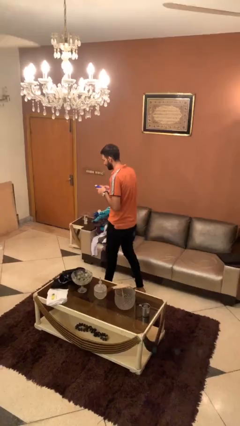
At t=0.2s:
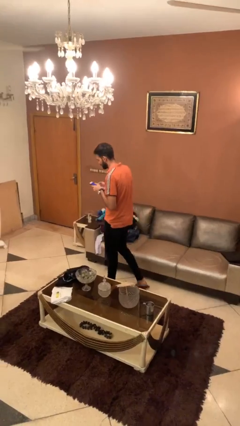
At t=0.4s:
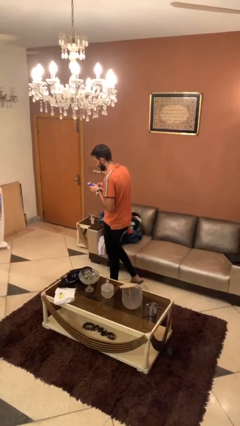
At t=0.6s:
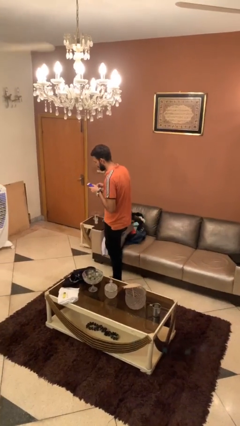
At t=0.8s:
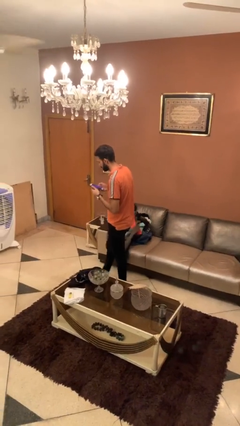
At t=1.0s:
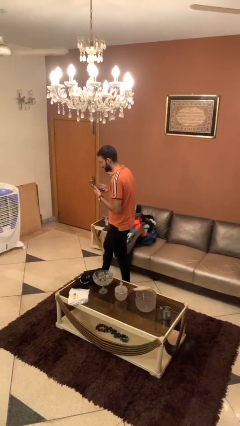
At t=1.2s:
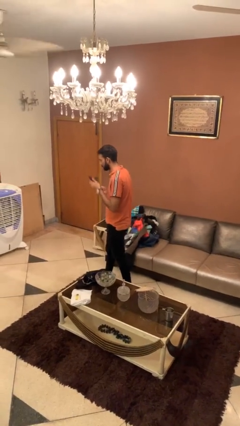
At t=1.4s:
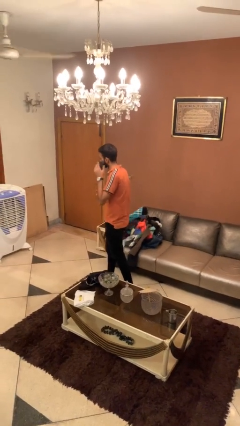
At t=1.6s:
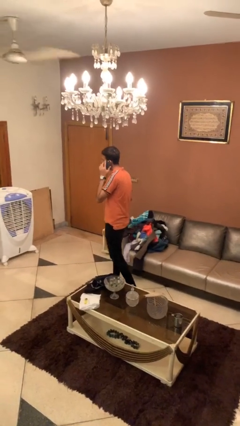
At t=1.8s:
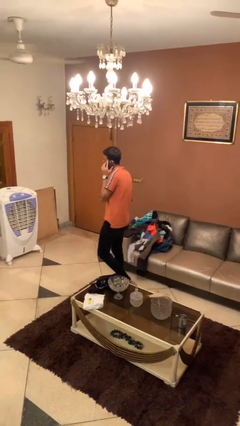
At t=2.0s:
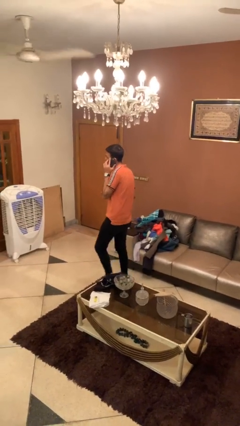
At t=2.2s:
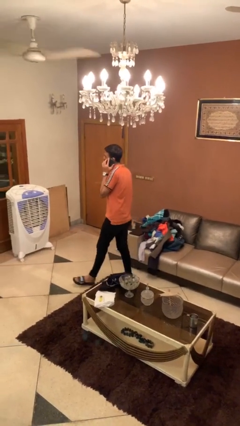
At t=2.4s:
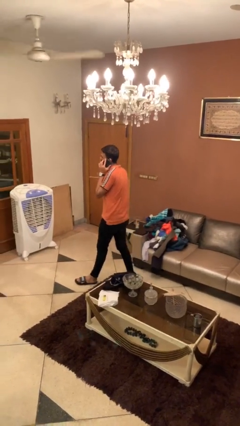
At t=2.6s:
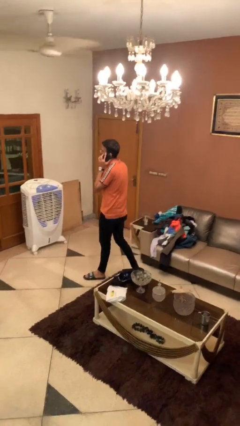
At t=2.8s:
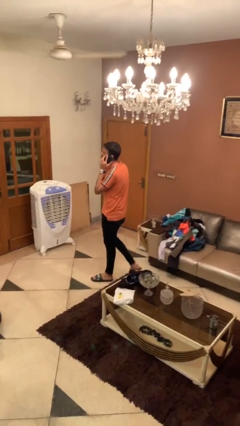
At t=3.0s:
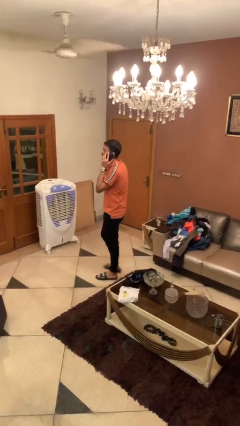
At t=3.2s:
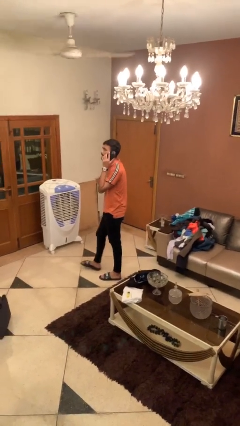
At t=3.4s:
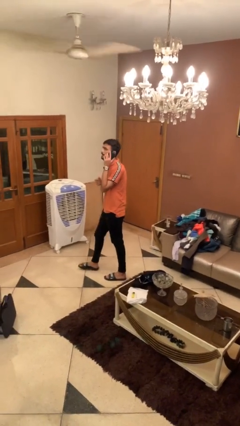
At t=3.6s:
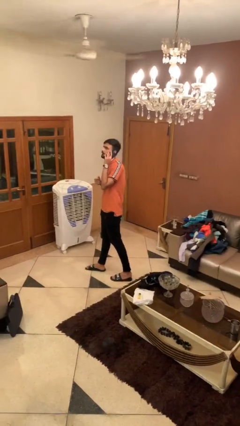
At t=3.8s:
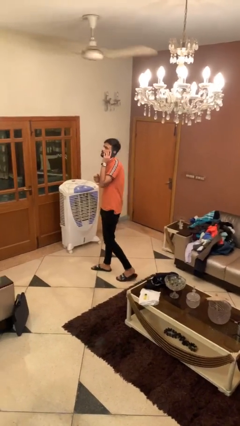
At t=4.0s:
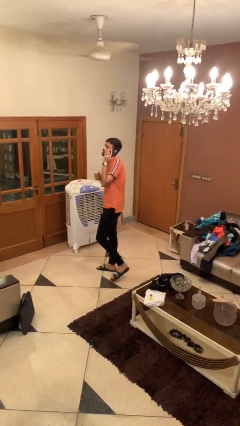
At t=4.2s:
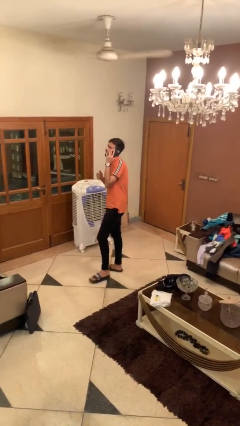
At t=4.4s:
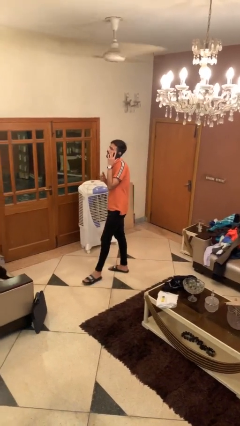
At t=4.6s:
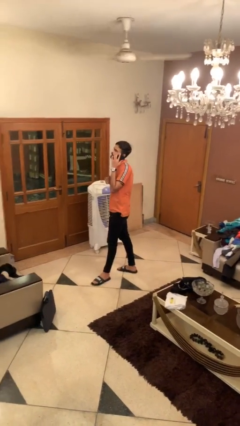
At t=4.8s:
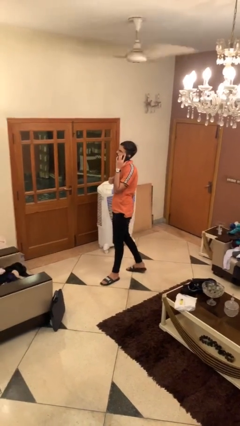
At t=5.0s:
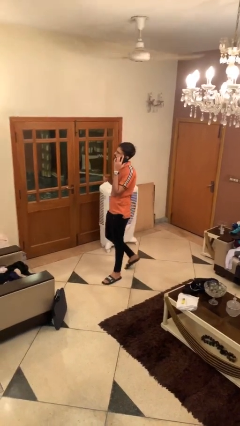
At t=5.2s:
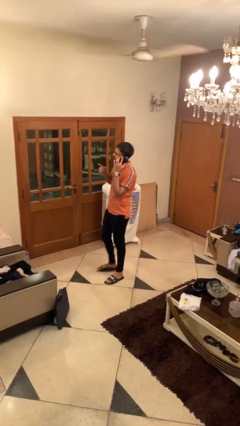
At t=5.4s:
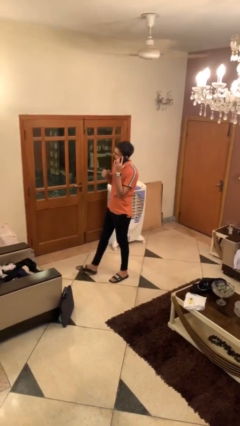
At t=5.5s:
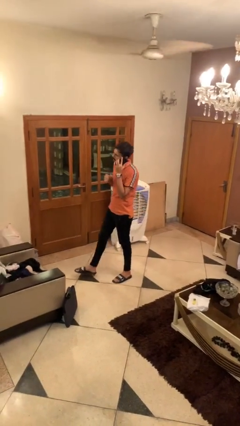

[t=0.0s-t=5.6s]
person talks on phone

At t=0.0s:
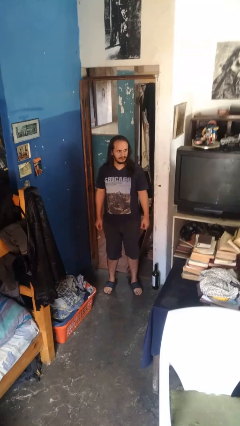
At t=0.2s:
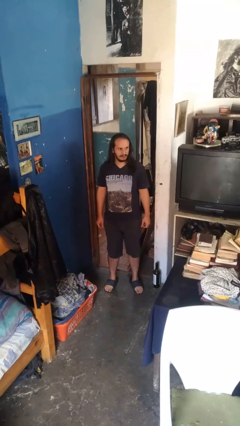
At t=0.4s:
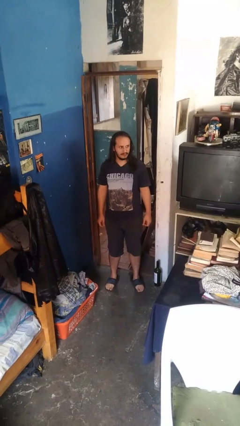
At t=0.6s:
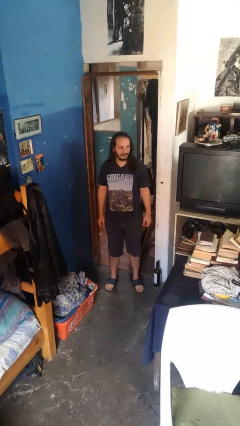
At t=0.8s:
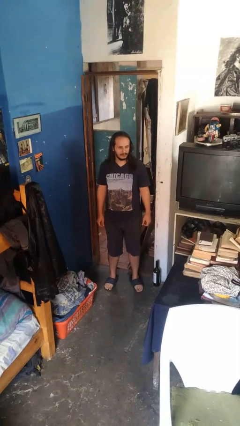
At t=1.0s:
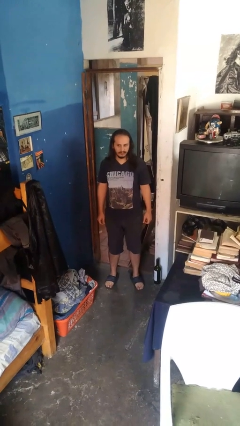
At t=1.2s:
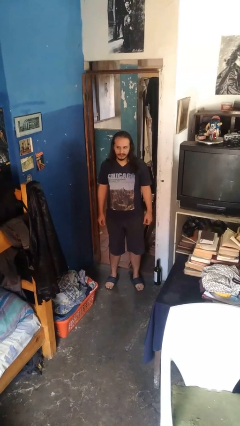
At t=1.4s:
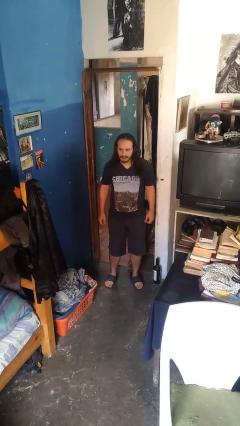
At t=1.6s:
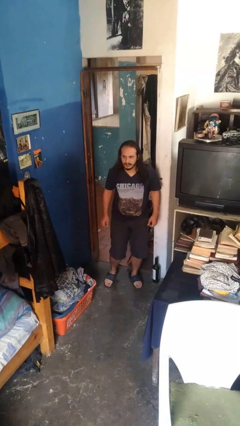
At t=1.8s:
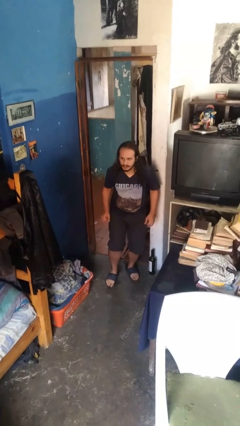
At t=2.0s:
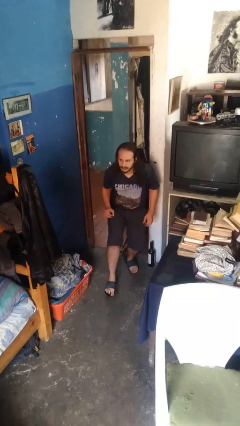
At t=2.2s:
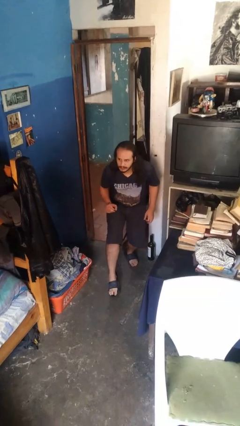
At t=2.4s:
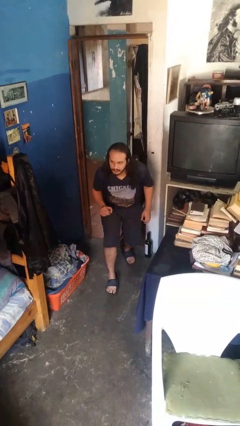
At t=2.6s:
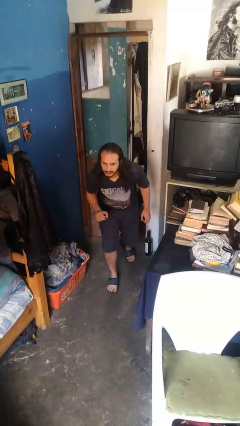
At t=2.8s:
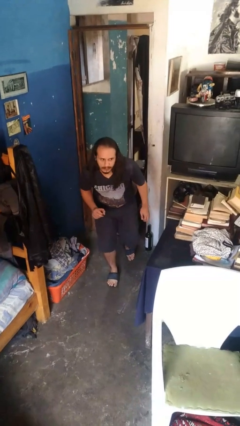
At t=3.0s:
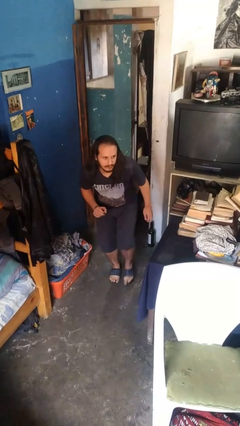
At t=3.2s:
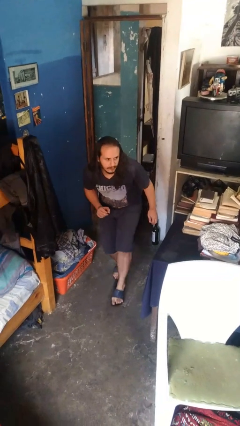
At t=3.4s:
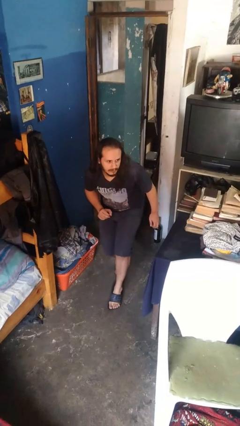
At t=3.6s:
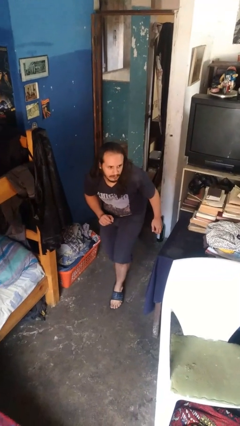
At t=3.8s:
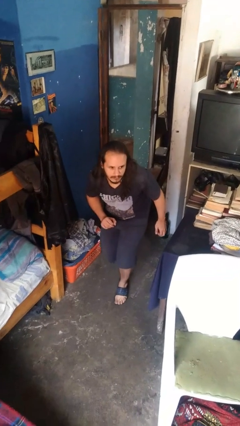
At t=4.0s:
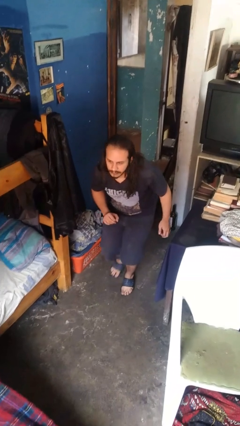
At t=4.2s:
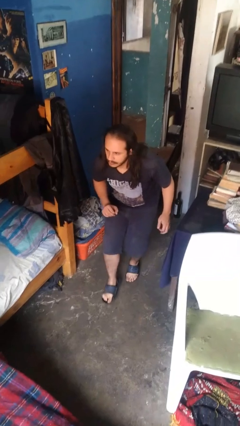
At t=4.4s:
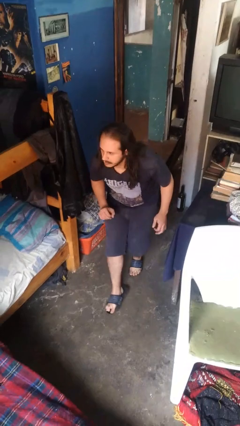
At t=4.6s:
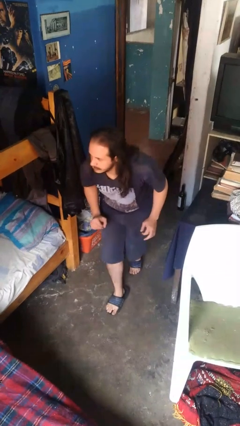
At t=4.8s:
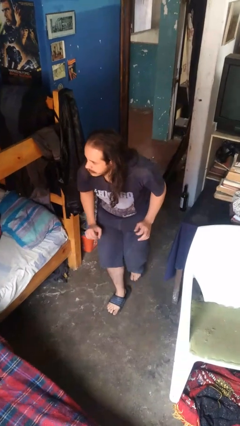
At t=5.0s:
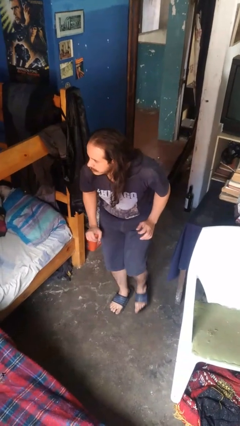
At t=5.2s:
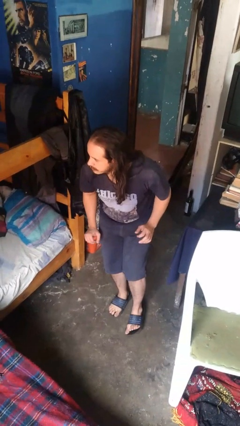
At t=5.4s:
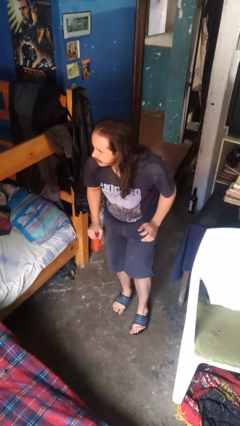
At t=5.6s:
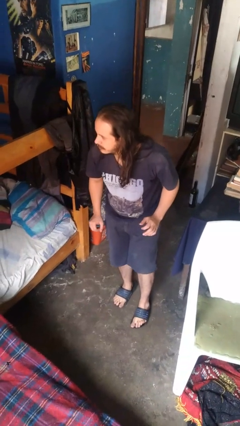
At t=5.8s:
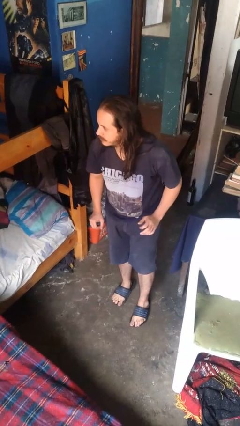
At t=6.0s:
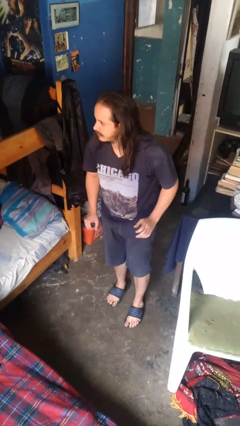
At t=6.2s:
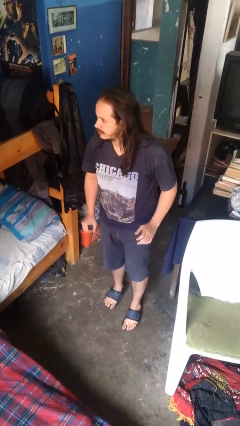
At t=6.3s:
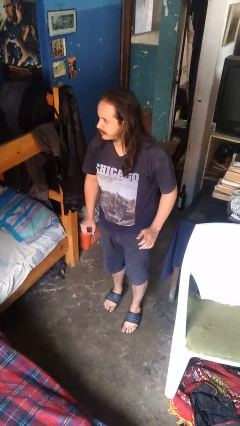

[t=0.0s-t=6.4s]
person walks tiptoe

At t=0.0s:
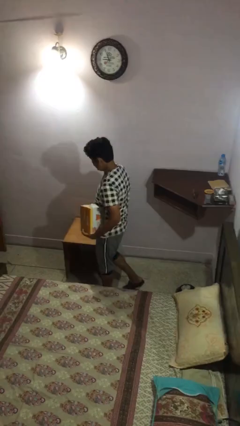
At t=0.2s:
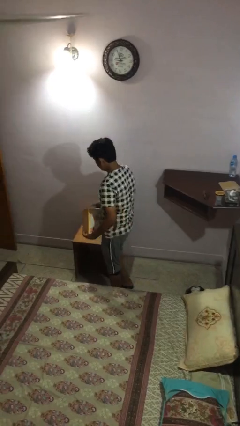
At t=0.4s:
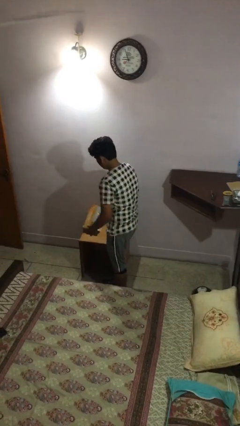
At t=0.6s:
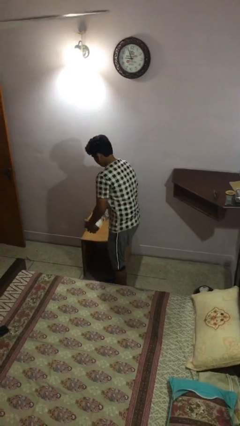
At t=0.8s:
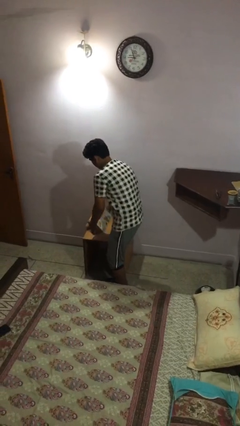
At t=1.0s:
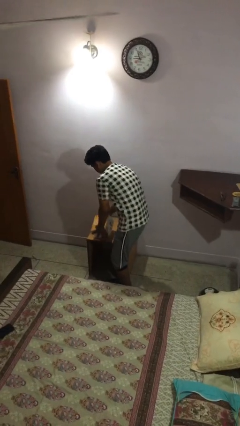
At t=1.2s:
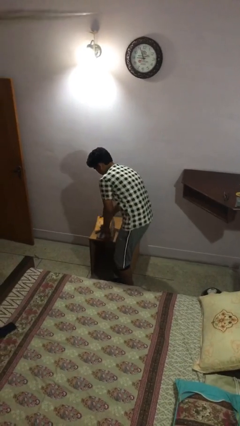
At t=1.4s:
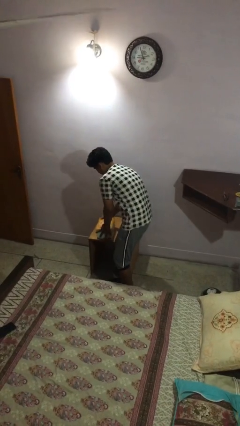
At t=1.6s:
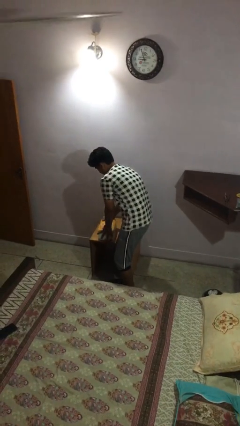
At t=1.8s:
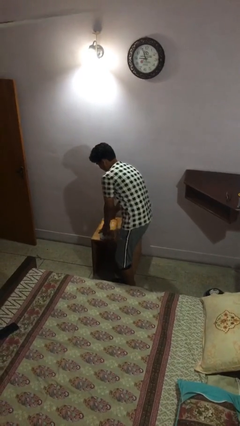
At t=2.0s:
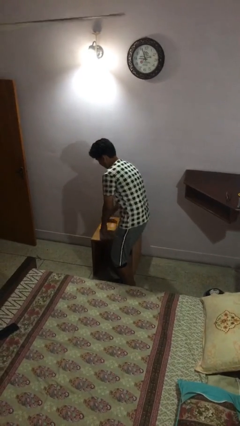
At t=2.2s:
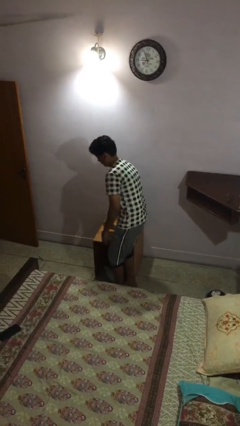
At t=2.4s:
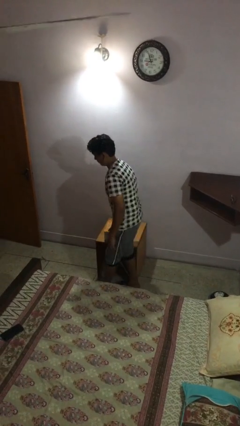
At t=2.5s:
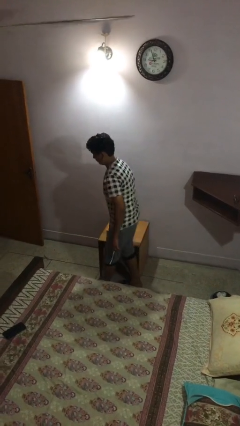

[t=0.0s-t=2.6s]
person puts down object on table

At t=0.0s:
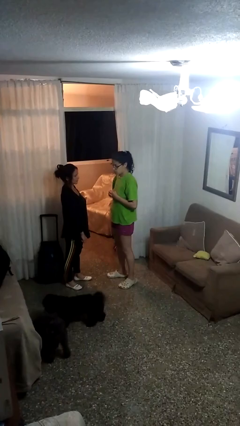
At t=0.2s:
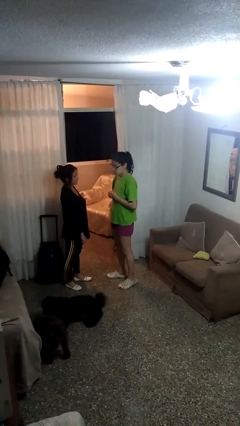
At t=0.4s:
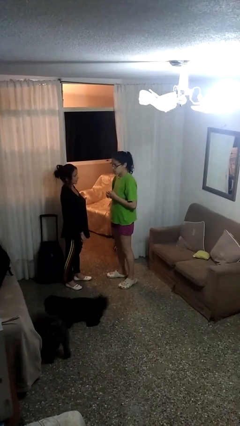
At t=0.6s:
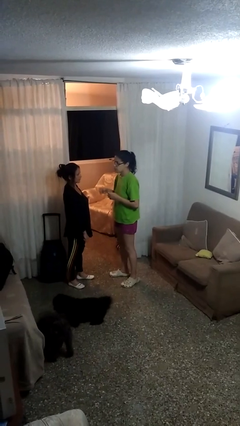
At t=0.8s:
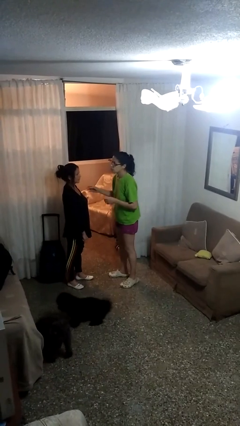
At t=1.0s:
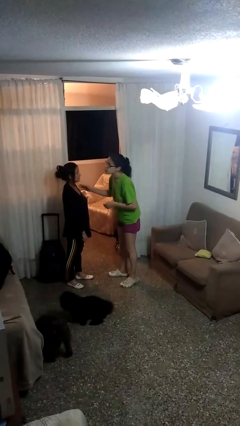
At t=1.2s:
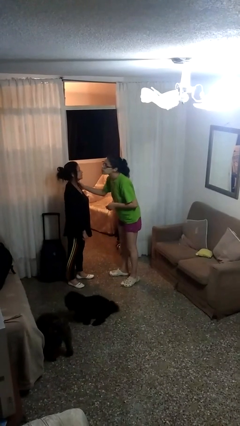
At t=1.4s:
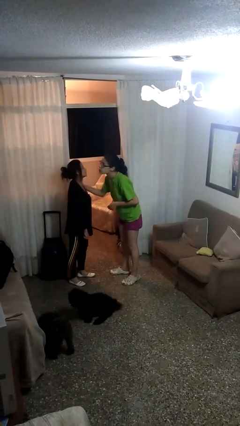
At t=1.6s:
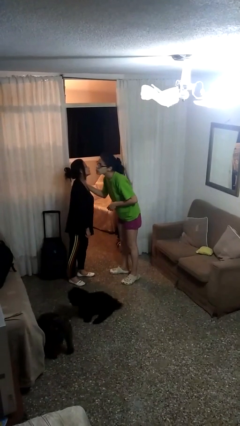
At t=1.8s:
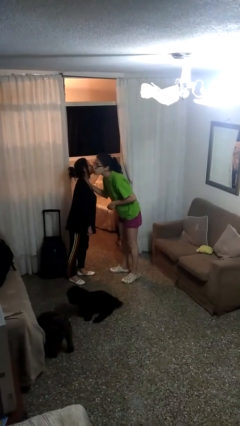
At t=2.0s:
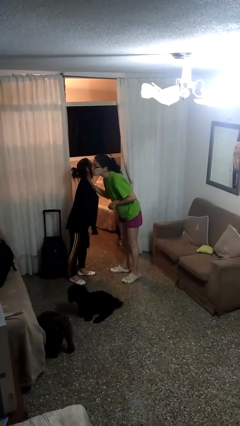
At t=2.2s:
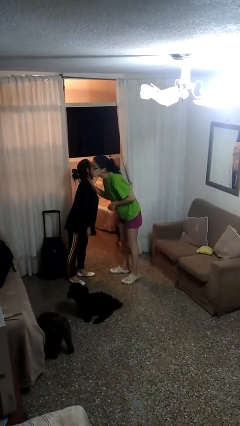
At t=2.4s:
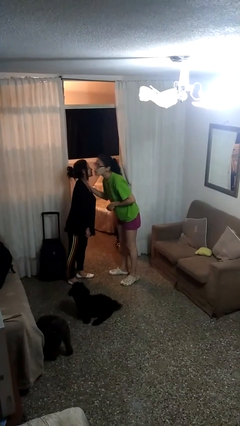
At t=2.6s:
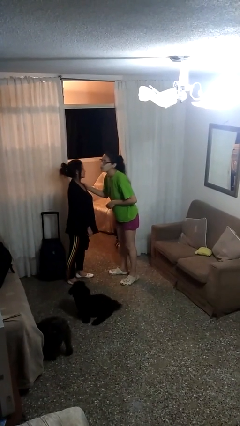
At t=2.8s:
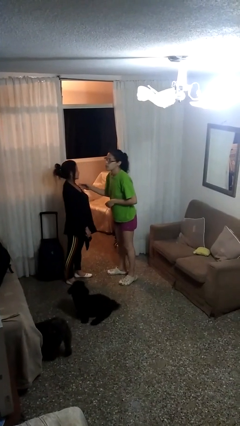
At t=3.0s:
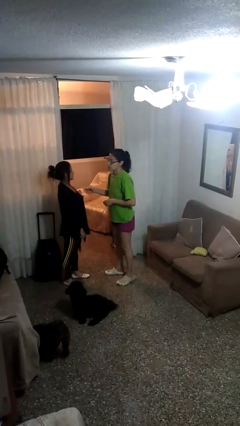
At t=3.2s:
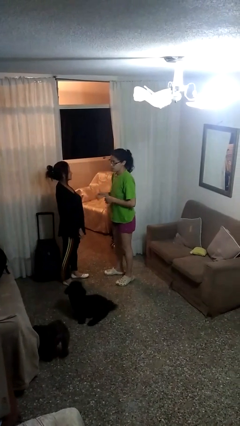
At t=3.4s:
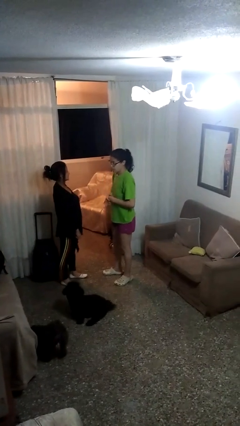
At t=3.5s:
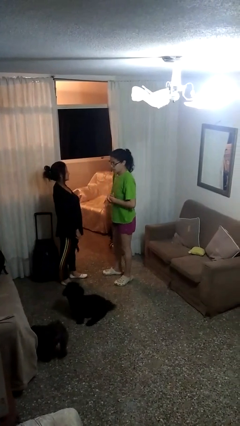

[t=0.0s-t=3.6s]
person kisses cheek of person
